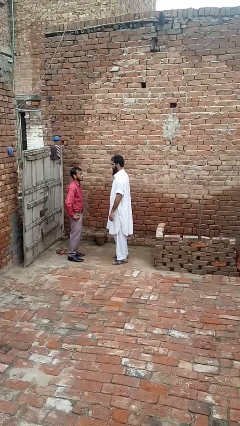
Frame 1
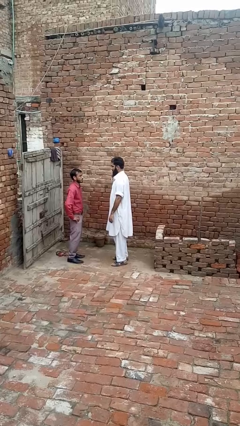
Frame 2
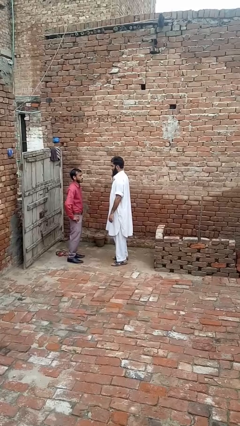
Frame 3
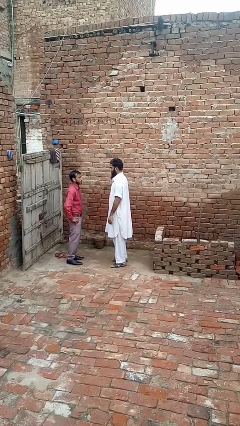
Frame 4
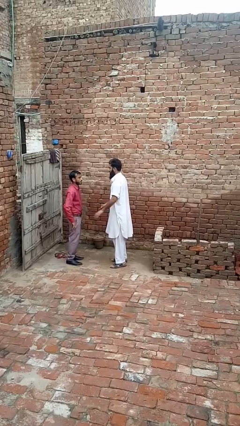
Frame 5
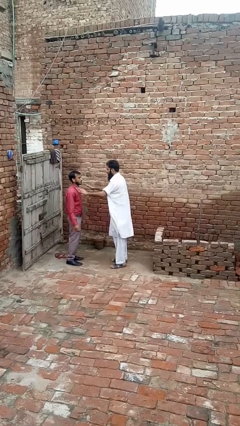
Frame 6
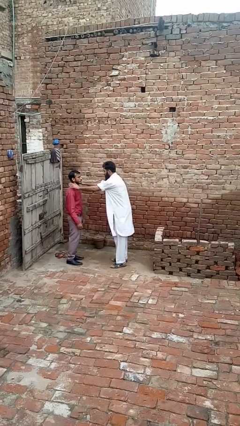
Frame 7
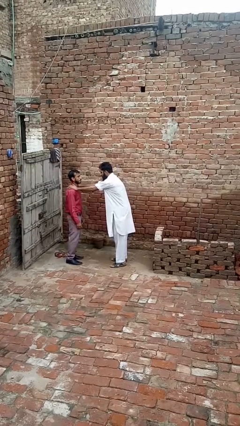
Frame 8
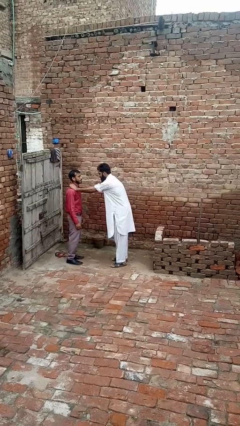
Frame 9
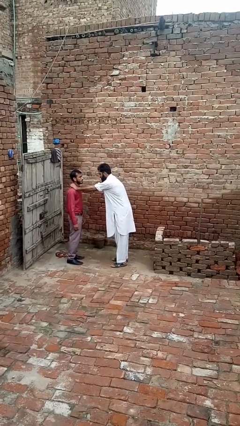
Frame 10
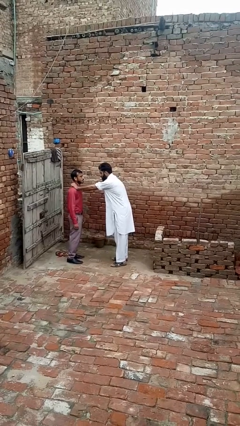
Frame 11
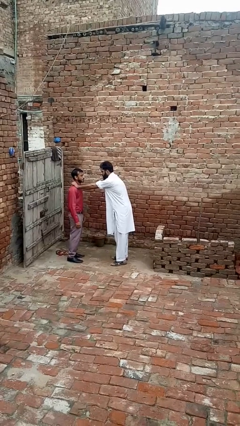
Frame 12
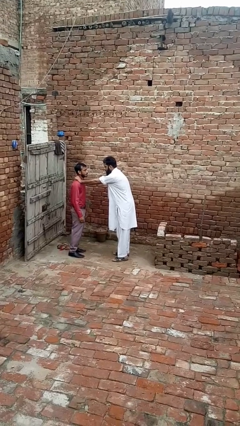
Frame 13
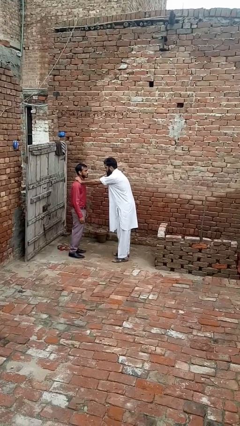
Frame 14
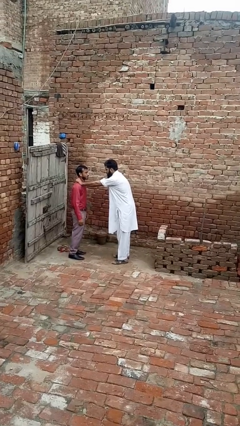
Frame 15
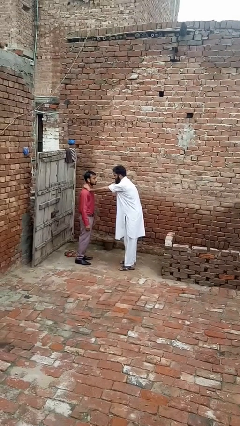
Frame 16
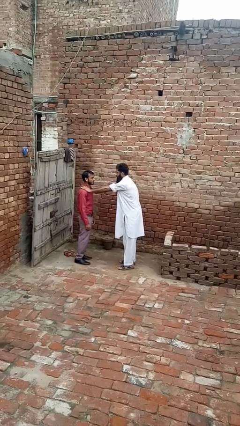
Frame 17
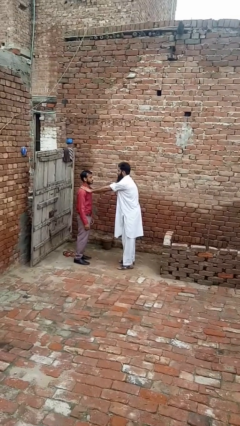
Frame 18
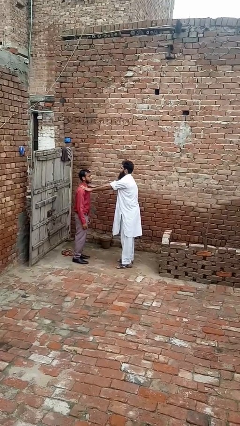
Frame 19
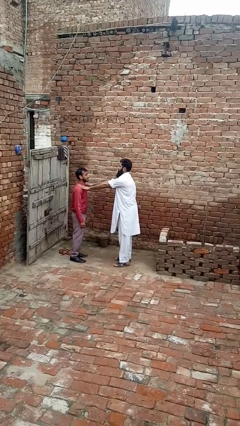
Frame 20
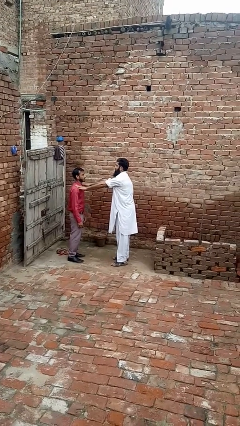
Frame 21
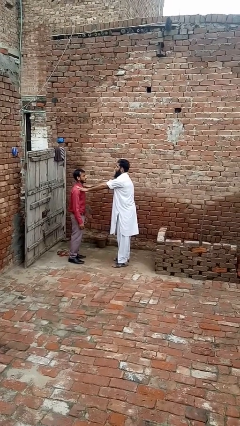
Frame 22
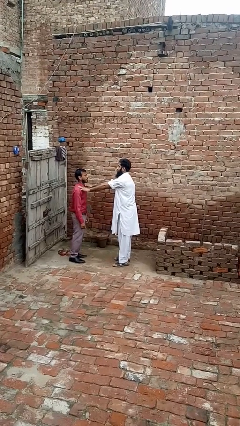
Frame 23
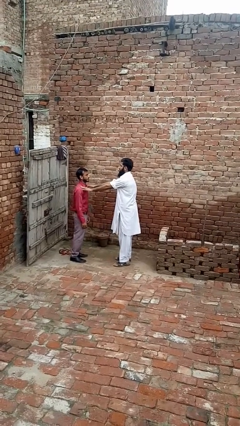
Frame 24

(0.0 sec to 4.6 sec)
person pounds shoulders of person

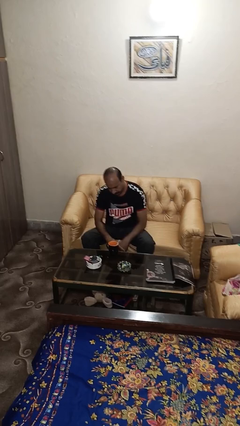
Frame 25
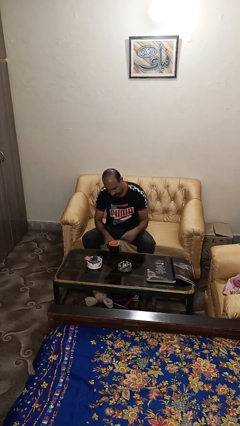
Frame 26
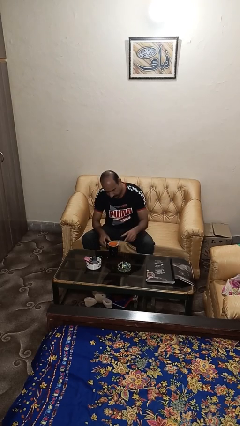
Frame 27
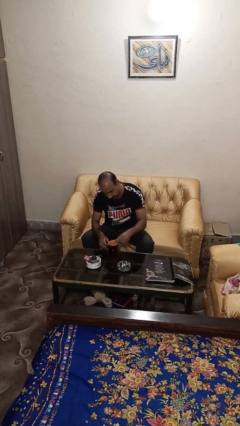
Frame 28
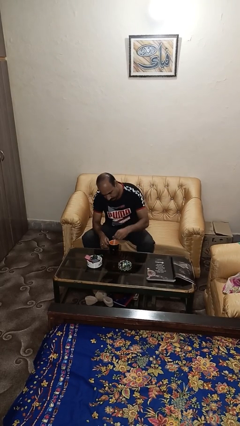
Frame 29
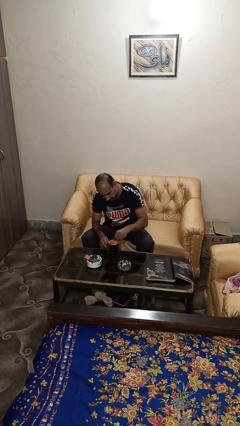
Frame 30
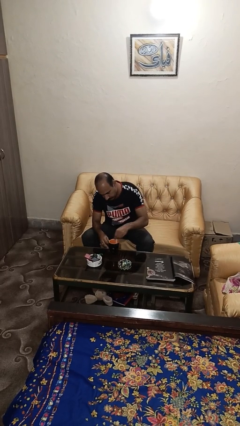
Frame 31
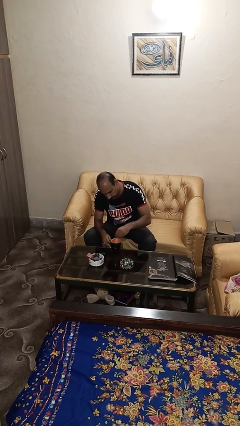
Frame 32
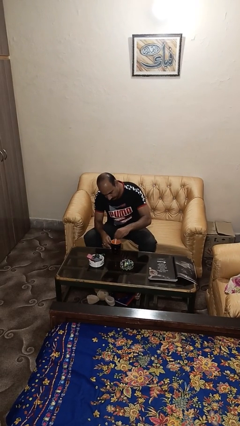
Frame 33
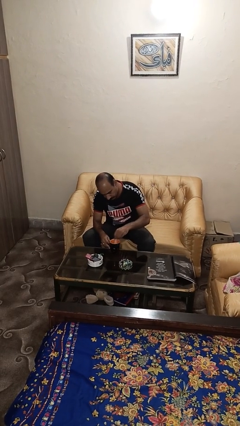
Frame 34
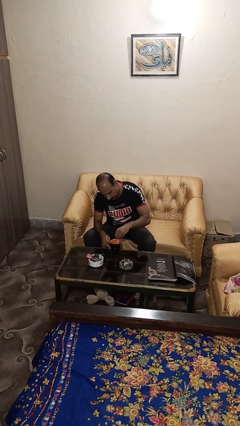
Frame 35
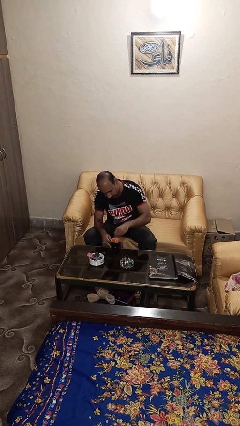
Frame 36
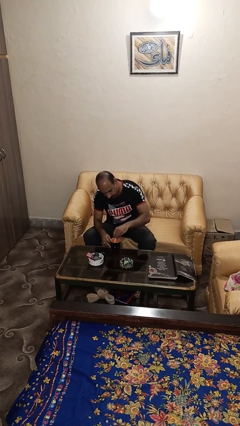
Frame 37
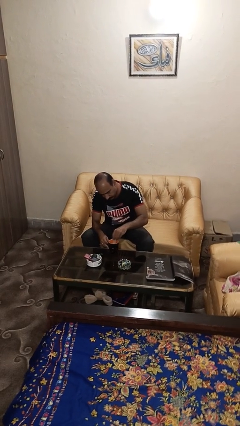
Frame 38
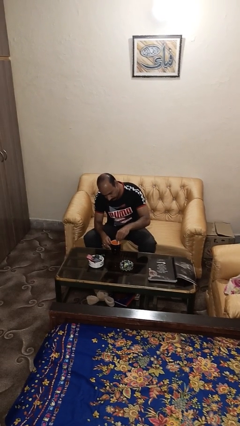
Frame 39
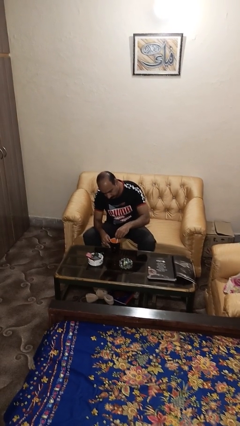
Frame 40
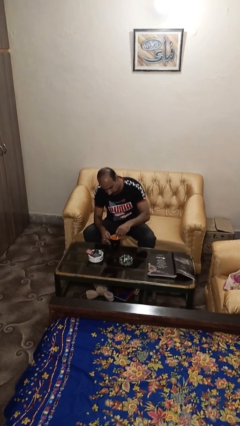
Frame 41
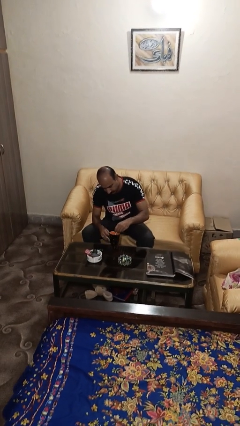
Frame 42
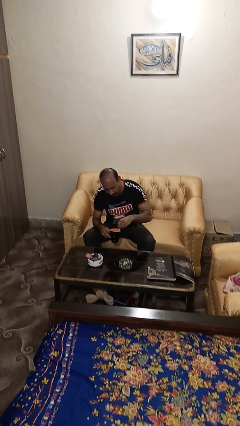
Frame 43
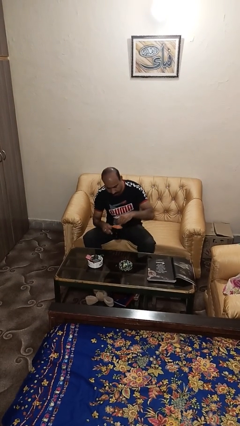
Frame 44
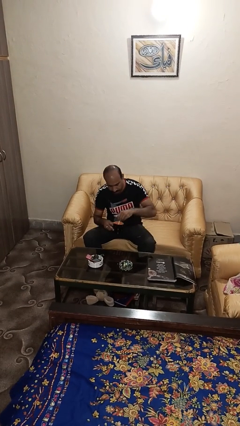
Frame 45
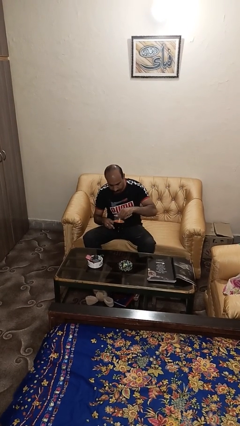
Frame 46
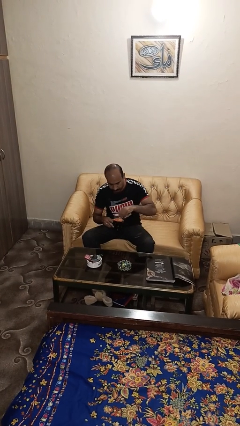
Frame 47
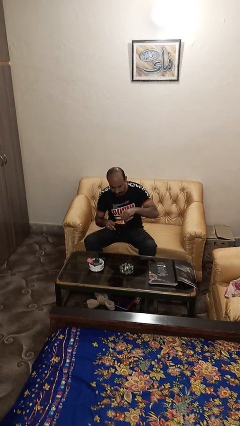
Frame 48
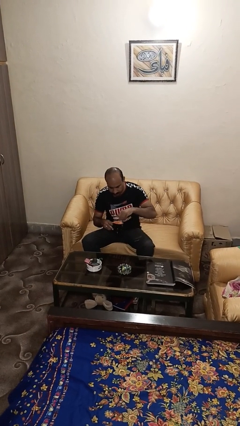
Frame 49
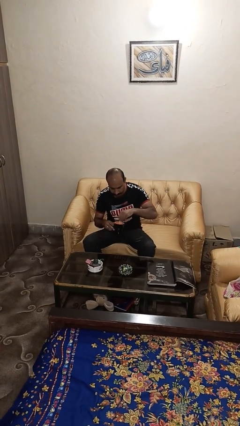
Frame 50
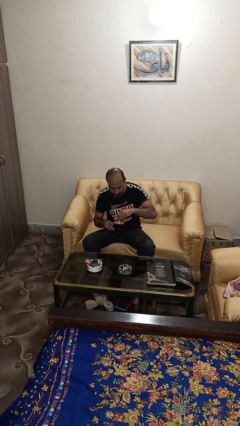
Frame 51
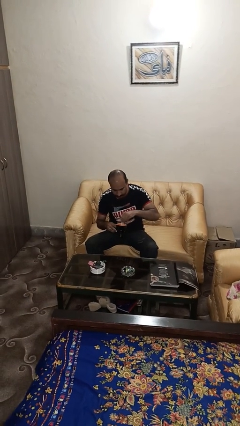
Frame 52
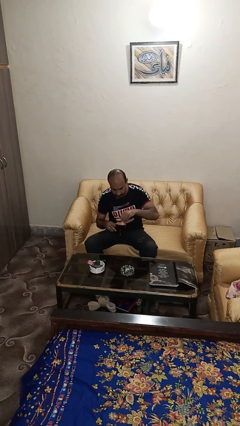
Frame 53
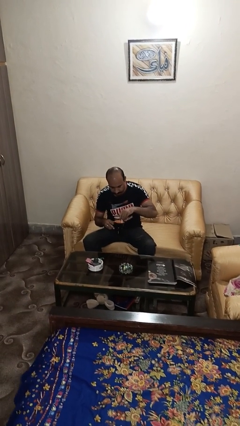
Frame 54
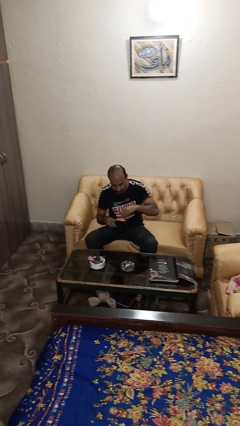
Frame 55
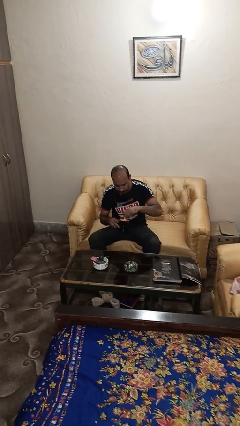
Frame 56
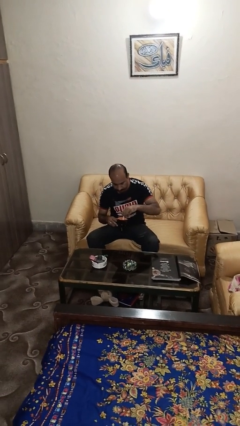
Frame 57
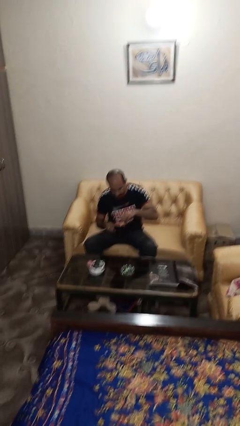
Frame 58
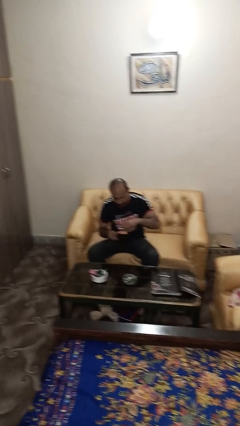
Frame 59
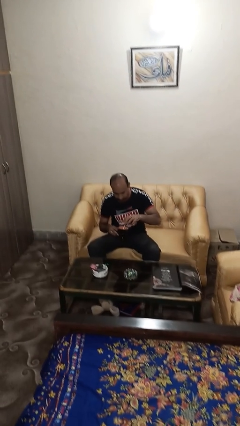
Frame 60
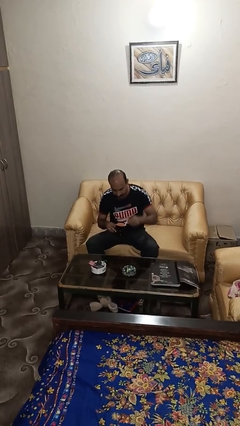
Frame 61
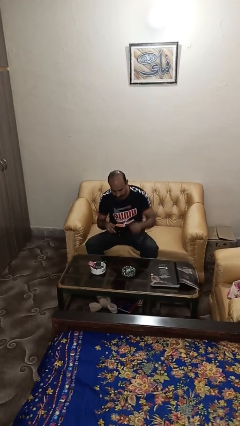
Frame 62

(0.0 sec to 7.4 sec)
person stirs mug

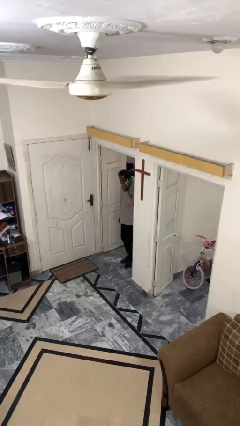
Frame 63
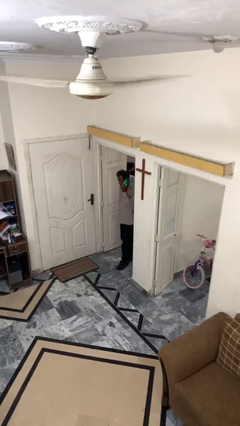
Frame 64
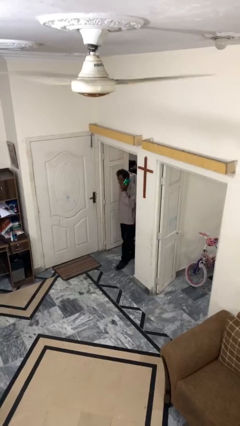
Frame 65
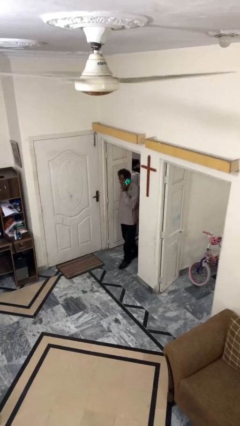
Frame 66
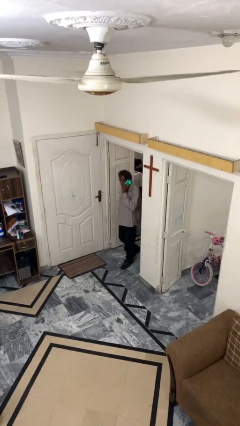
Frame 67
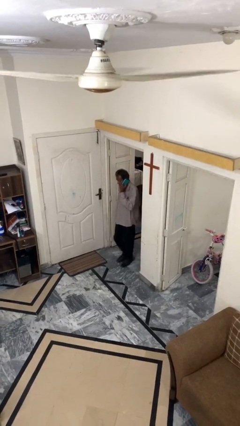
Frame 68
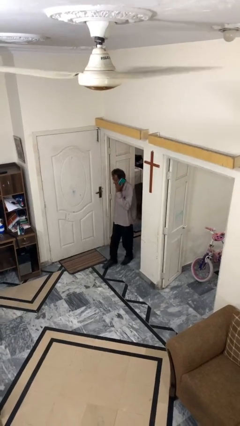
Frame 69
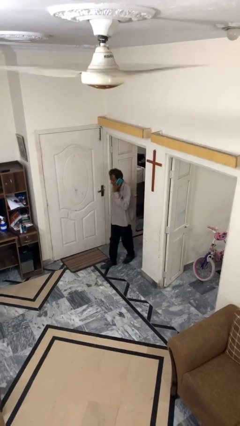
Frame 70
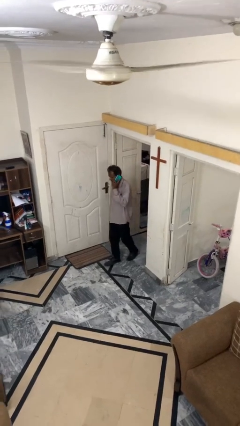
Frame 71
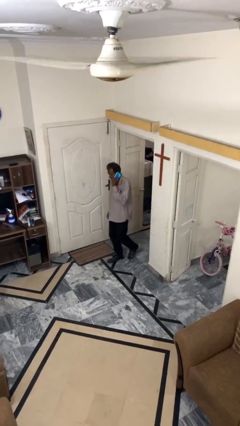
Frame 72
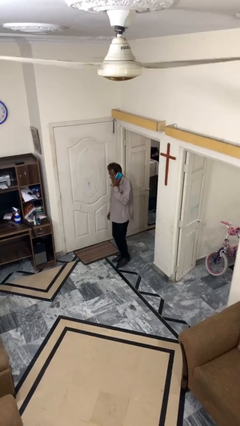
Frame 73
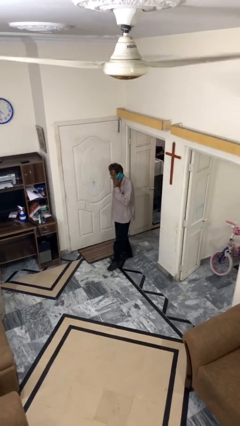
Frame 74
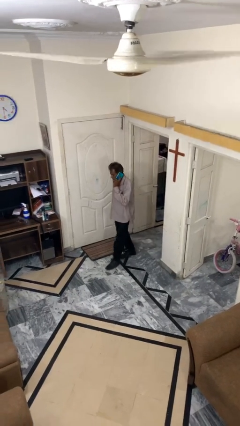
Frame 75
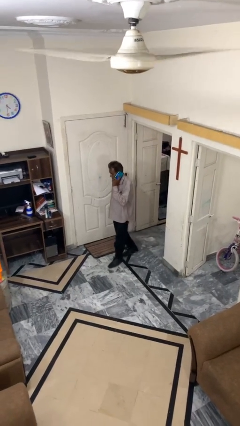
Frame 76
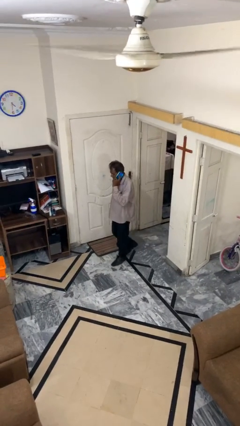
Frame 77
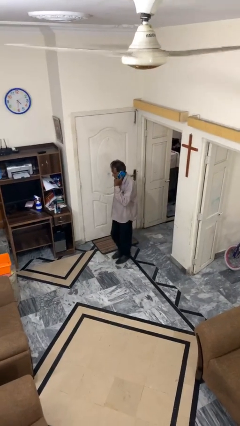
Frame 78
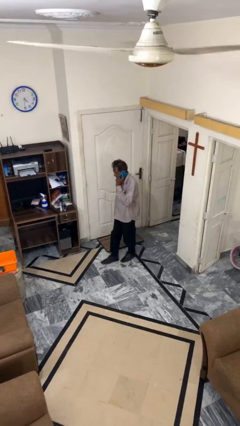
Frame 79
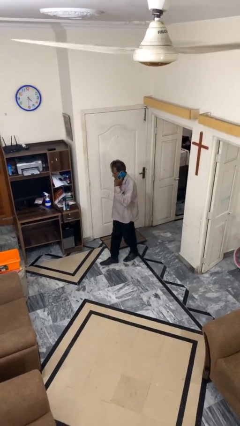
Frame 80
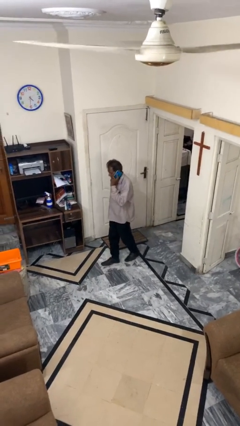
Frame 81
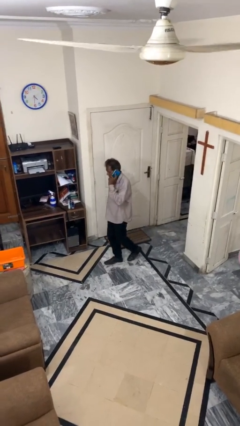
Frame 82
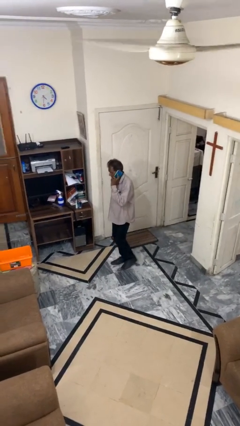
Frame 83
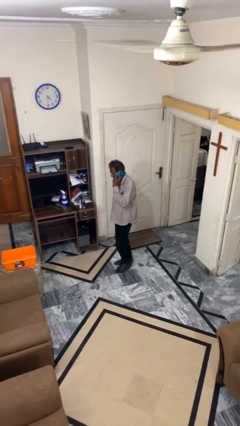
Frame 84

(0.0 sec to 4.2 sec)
person enters scene through structure

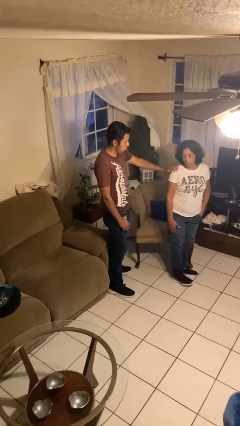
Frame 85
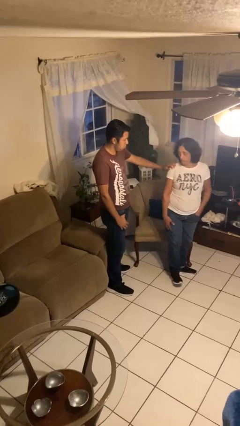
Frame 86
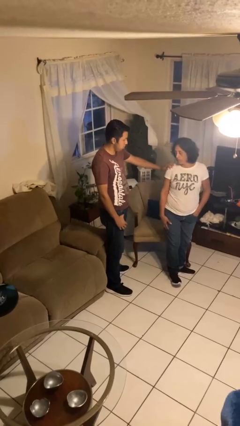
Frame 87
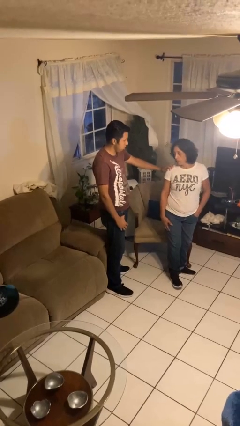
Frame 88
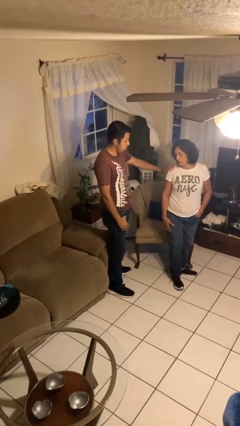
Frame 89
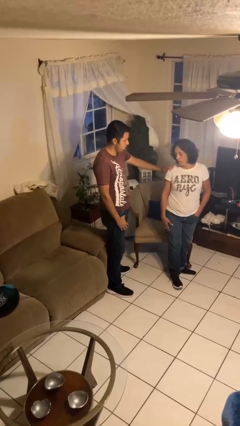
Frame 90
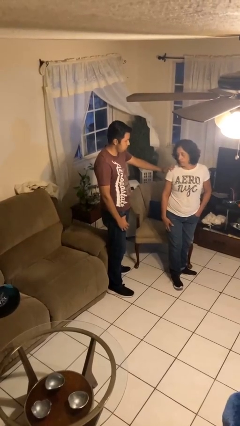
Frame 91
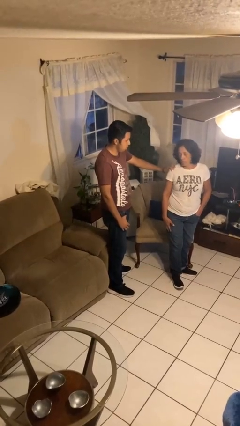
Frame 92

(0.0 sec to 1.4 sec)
person spins person around

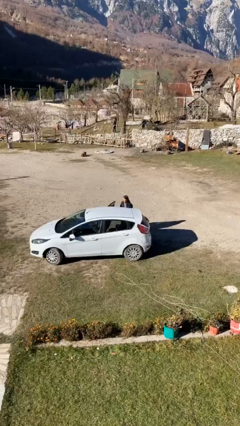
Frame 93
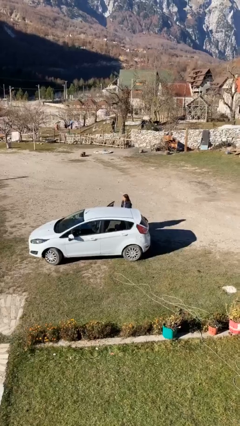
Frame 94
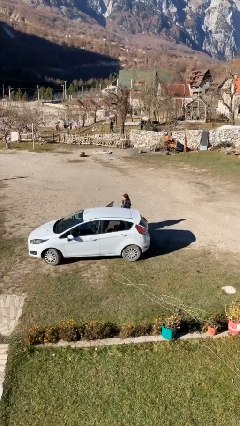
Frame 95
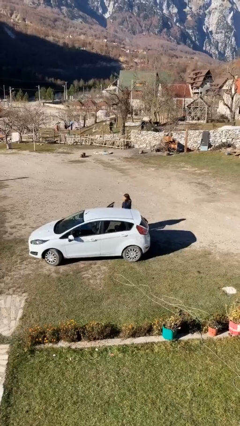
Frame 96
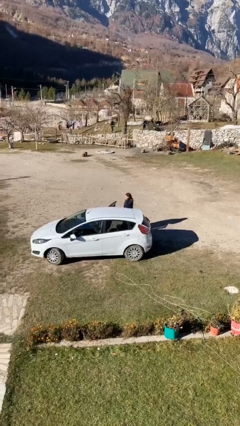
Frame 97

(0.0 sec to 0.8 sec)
person unloads car
